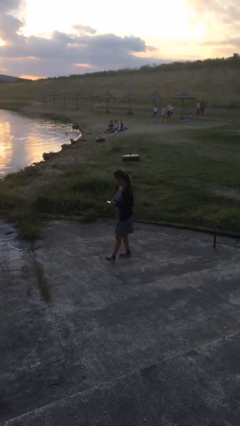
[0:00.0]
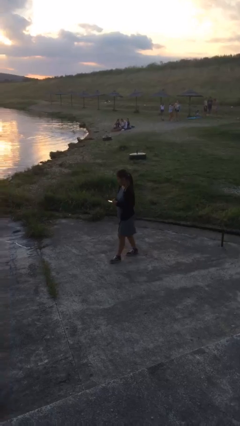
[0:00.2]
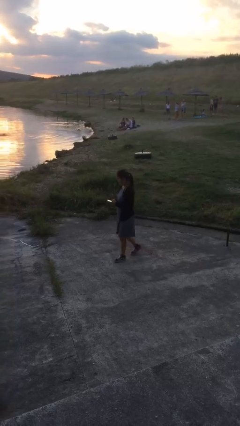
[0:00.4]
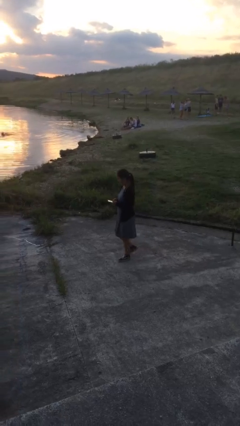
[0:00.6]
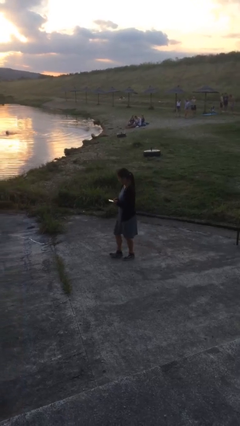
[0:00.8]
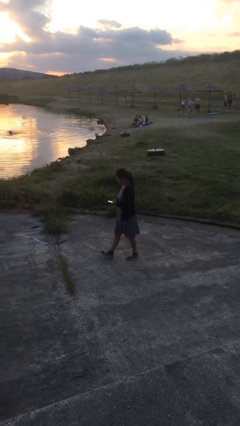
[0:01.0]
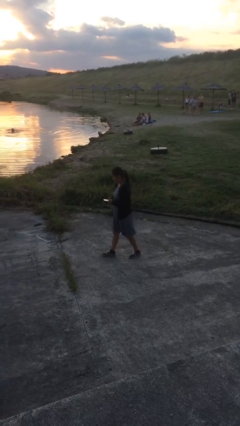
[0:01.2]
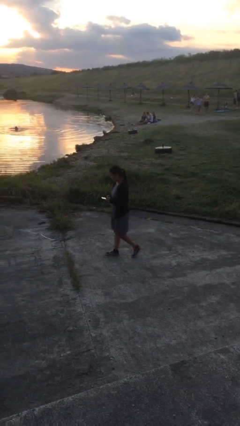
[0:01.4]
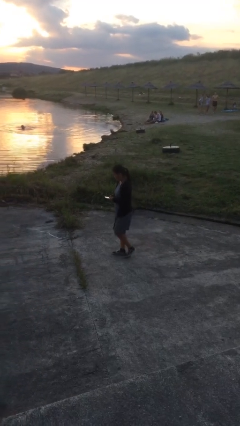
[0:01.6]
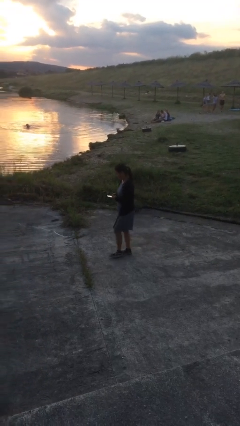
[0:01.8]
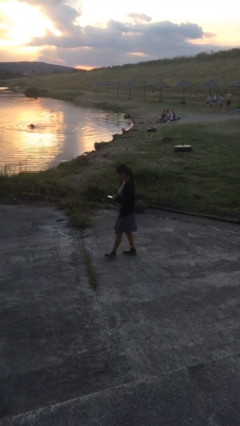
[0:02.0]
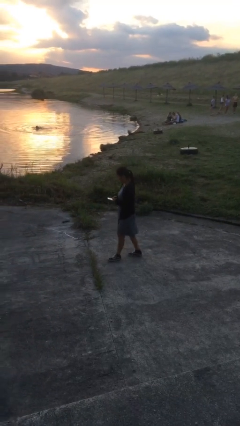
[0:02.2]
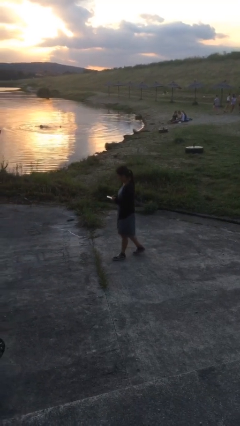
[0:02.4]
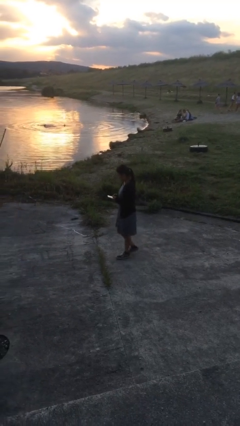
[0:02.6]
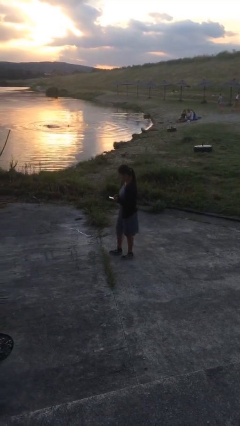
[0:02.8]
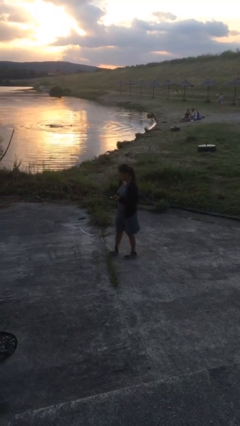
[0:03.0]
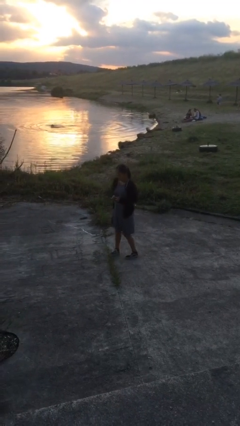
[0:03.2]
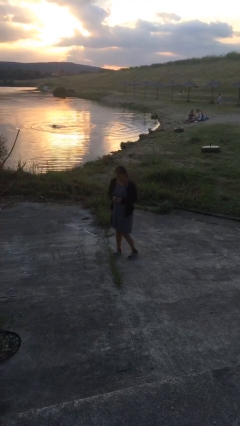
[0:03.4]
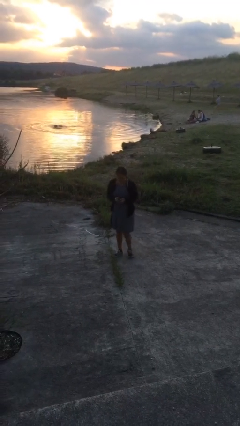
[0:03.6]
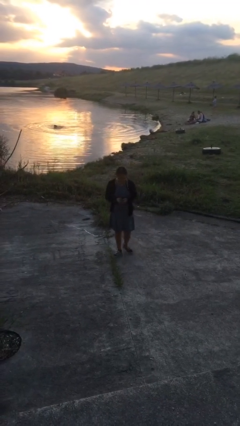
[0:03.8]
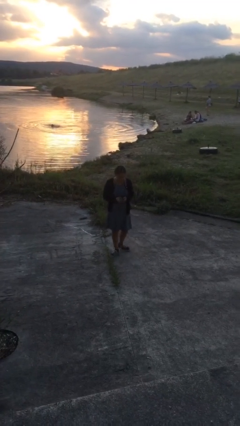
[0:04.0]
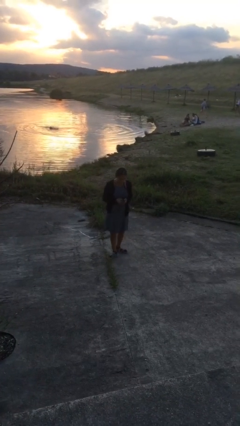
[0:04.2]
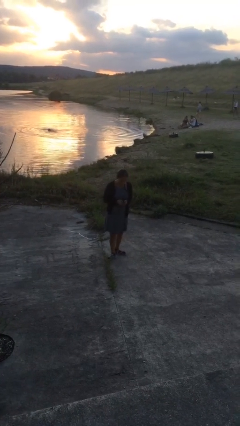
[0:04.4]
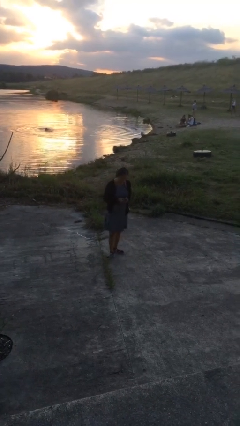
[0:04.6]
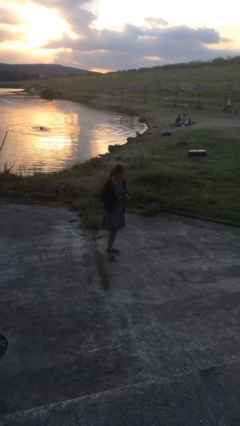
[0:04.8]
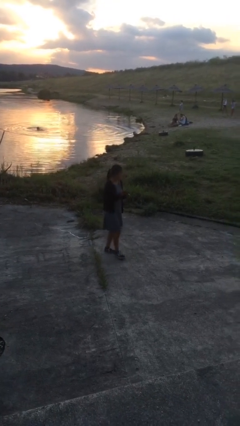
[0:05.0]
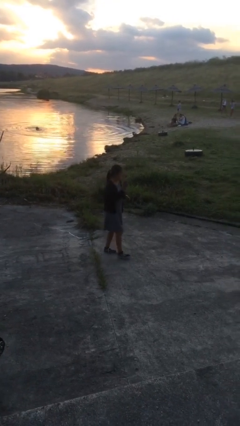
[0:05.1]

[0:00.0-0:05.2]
person texts on phone

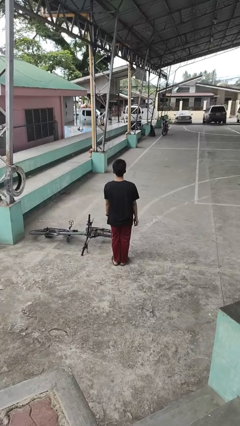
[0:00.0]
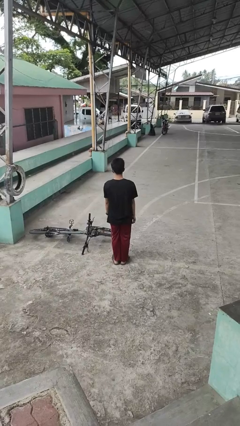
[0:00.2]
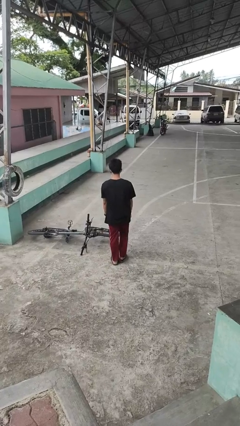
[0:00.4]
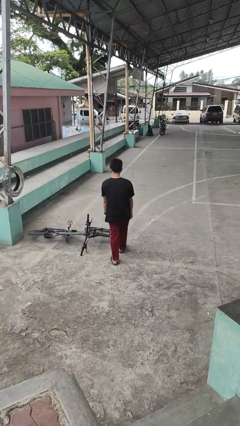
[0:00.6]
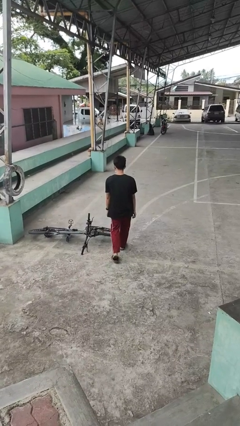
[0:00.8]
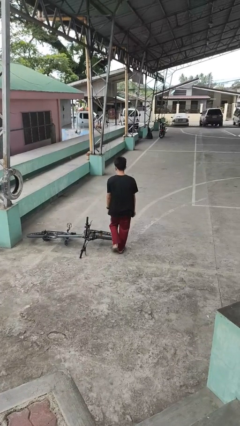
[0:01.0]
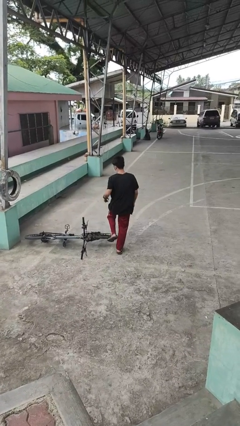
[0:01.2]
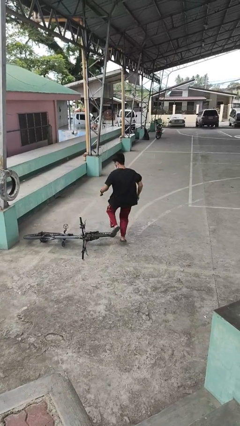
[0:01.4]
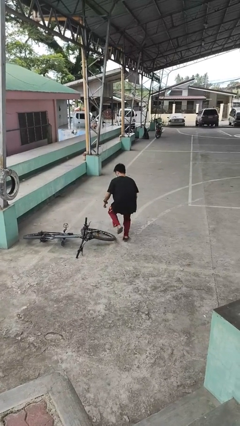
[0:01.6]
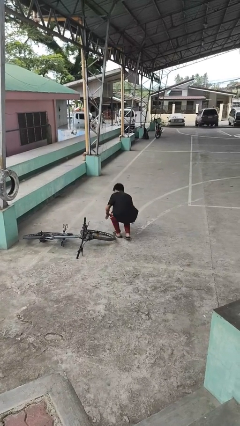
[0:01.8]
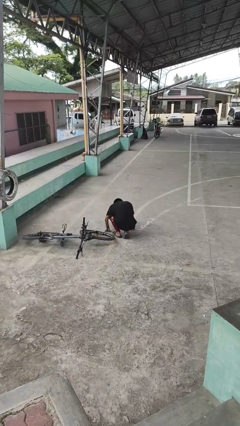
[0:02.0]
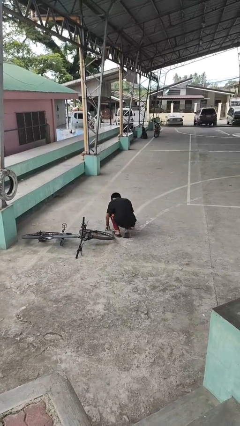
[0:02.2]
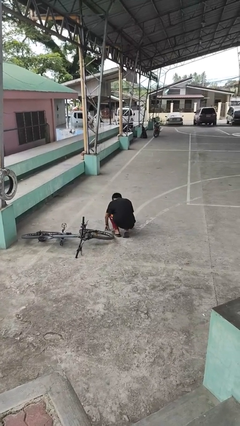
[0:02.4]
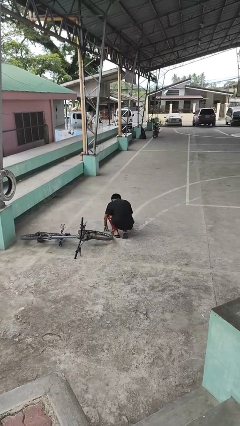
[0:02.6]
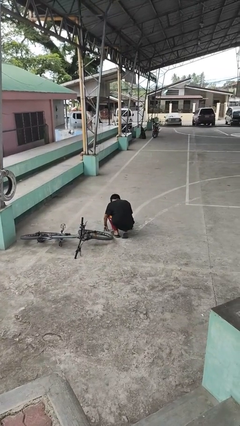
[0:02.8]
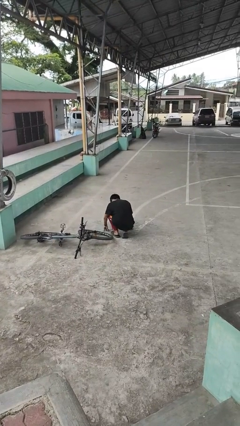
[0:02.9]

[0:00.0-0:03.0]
person trips on object on floor

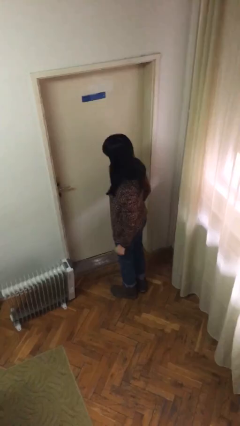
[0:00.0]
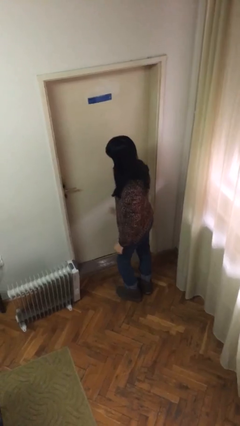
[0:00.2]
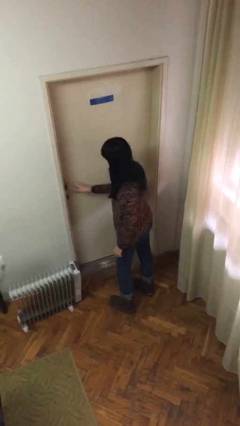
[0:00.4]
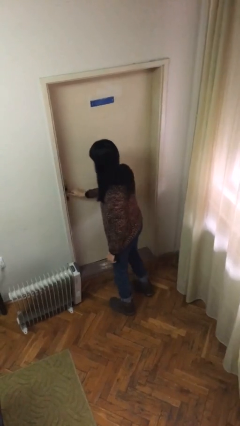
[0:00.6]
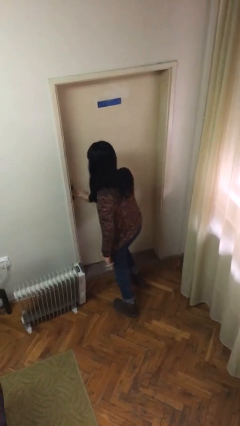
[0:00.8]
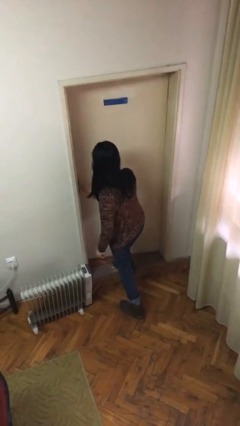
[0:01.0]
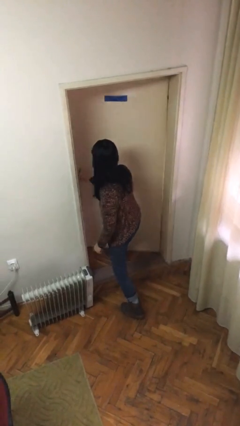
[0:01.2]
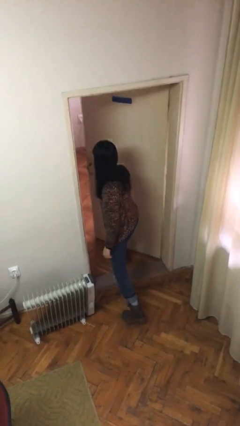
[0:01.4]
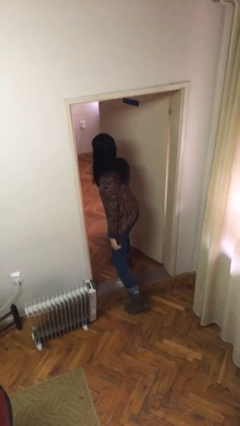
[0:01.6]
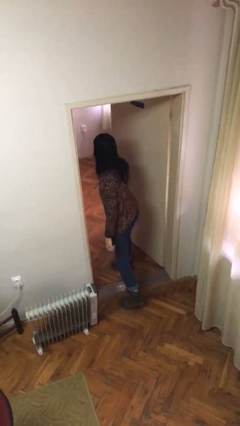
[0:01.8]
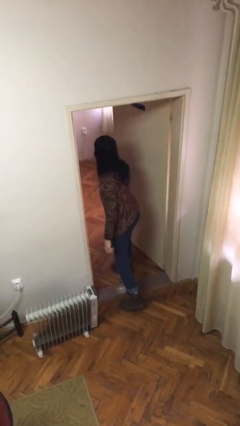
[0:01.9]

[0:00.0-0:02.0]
person opens facility door

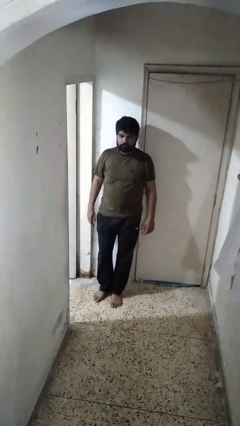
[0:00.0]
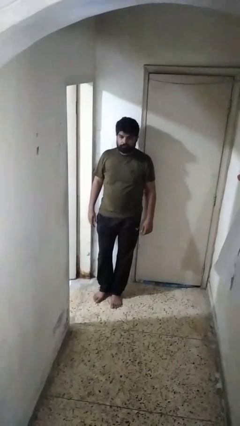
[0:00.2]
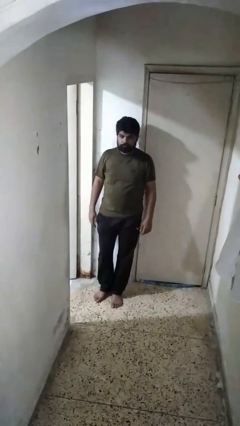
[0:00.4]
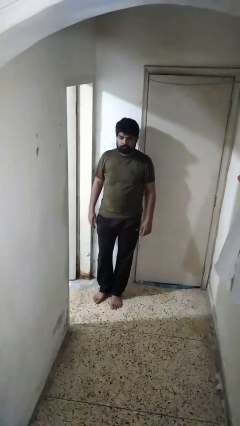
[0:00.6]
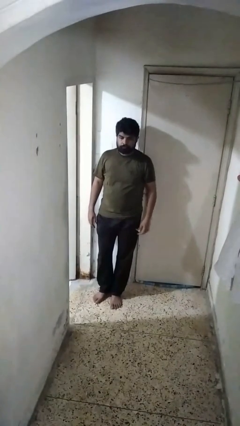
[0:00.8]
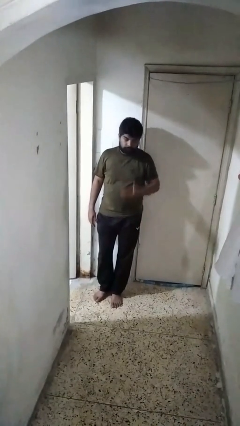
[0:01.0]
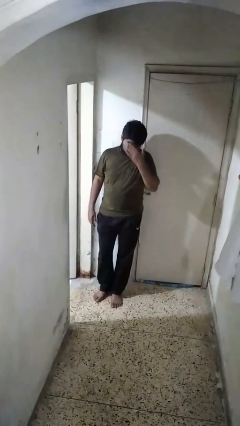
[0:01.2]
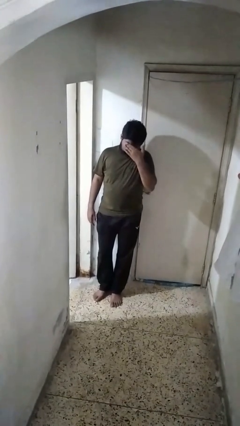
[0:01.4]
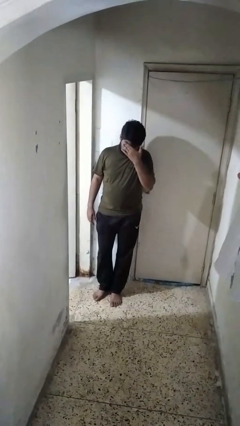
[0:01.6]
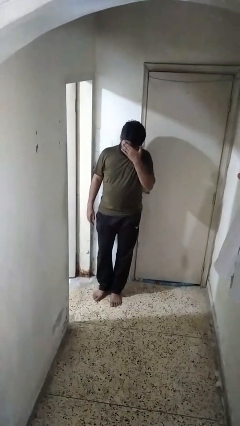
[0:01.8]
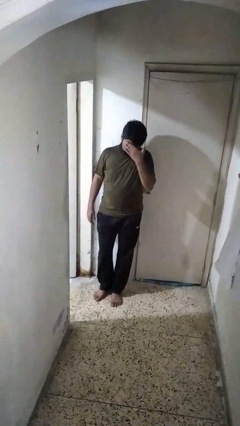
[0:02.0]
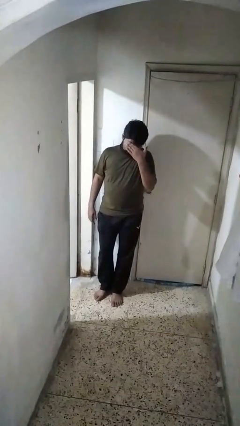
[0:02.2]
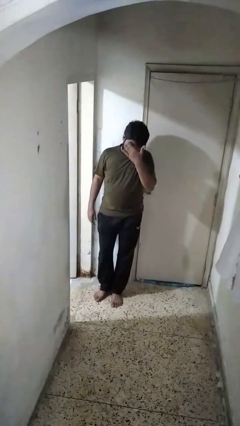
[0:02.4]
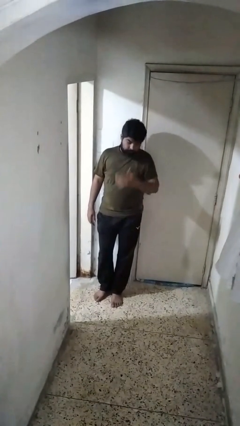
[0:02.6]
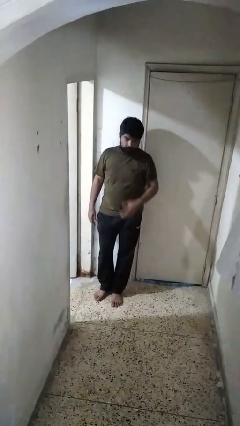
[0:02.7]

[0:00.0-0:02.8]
person rubs eyes

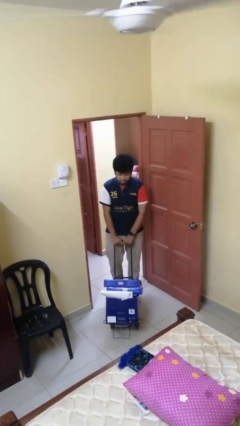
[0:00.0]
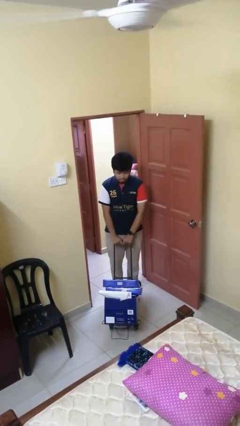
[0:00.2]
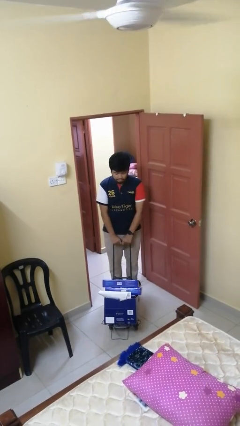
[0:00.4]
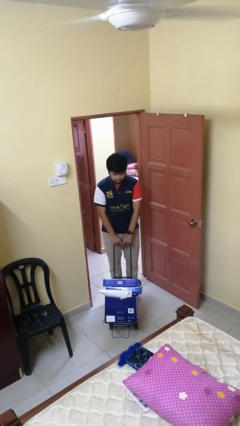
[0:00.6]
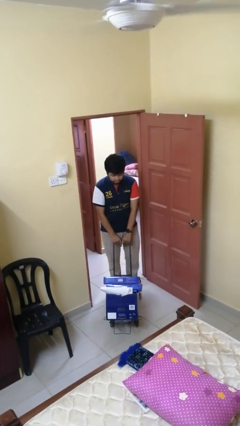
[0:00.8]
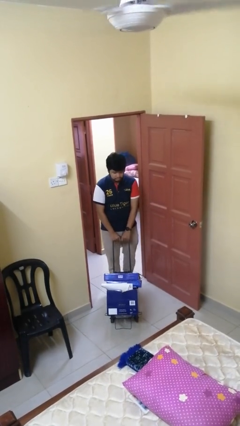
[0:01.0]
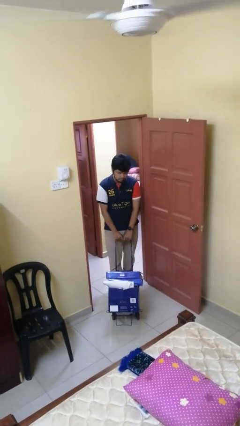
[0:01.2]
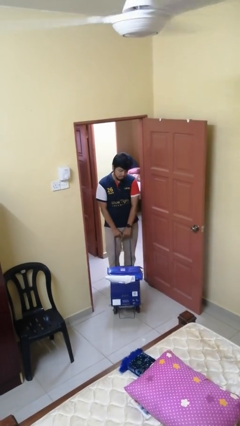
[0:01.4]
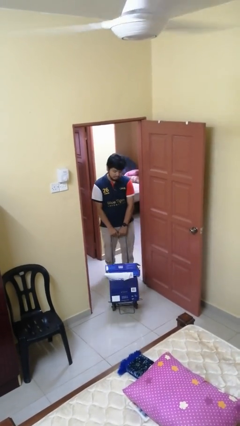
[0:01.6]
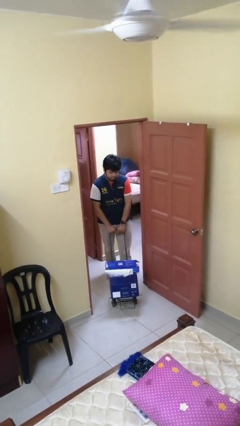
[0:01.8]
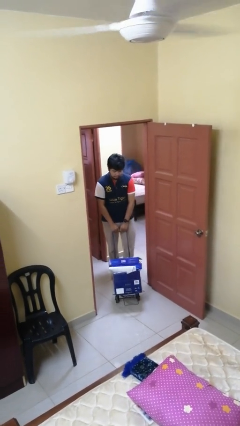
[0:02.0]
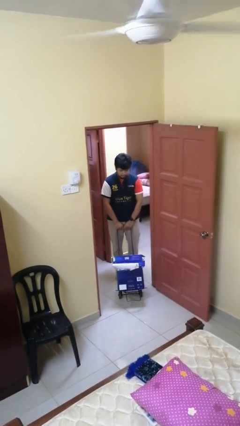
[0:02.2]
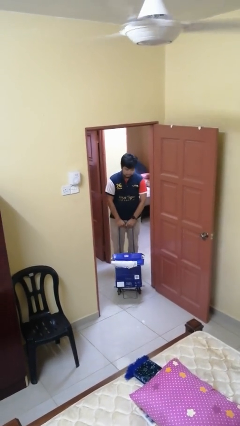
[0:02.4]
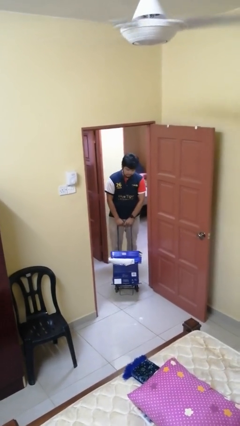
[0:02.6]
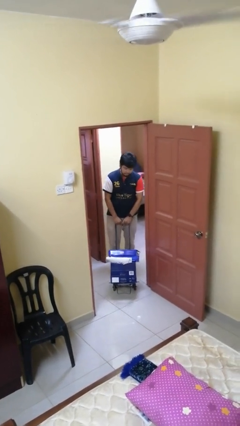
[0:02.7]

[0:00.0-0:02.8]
person pulls wheeled cart

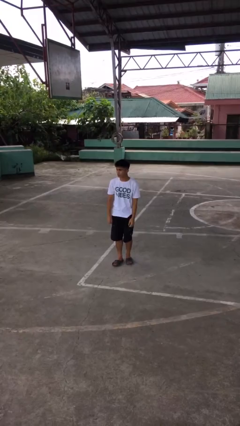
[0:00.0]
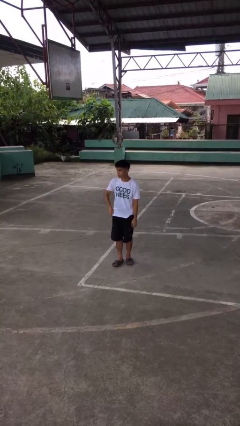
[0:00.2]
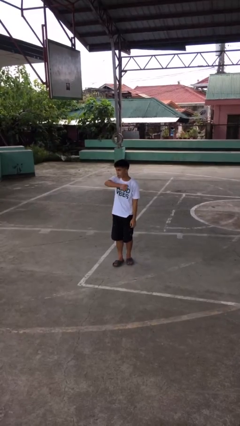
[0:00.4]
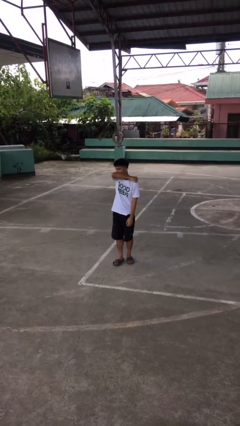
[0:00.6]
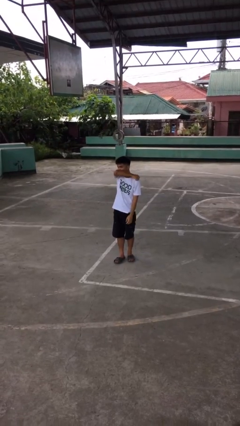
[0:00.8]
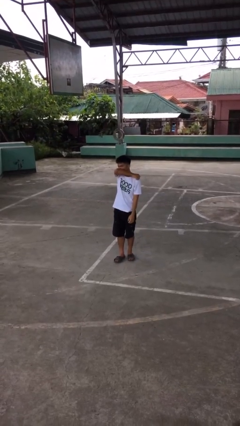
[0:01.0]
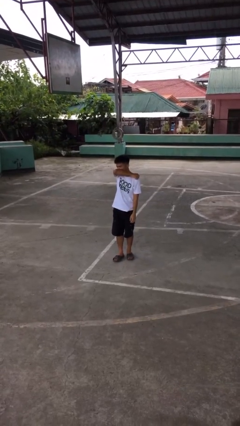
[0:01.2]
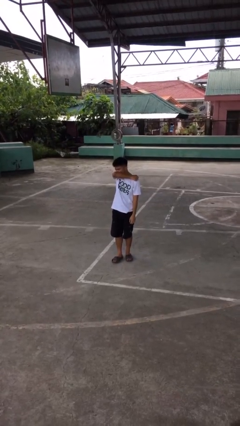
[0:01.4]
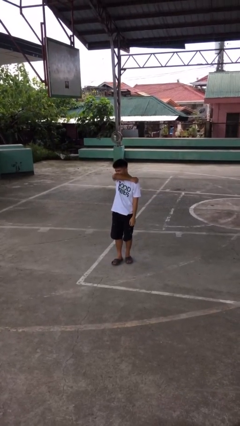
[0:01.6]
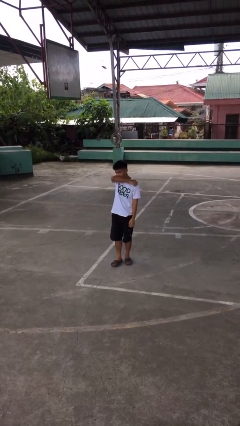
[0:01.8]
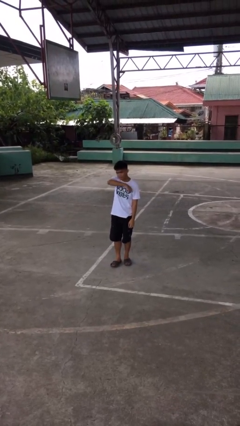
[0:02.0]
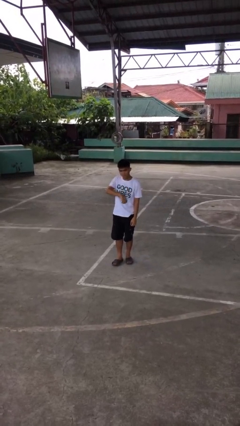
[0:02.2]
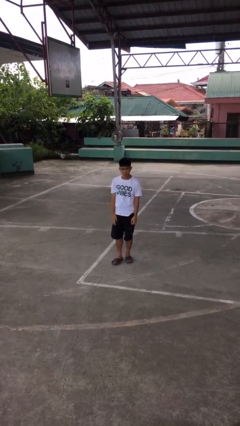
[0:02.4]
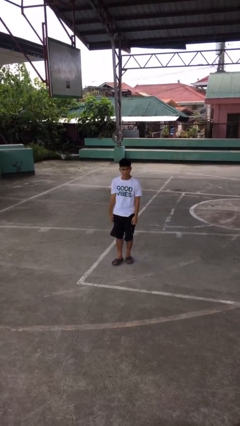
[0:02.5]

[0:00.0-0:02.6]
person sneezes into arm
